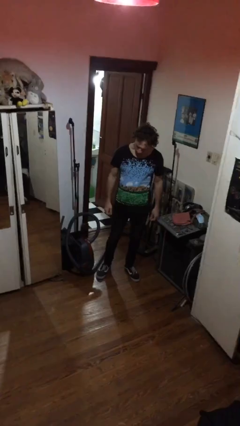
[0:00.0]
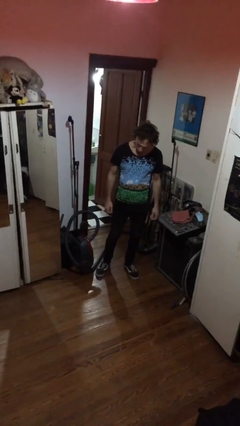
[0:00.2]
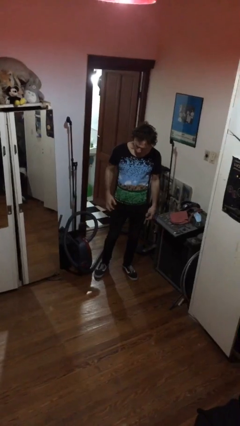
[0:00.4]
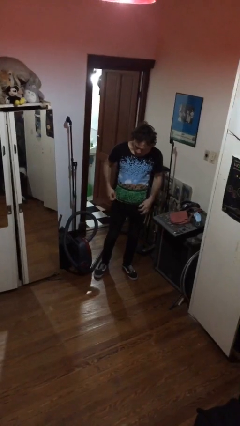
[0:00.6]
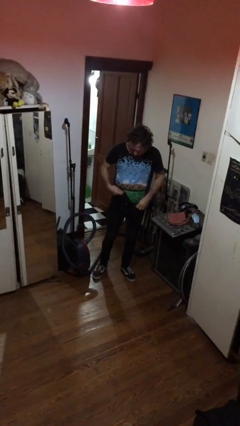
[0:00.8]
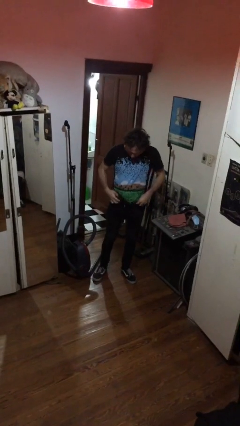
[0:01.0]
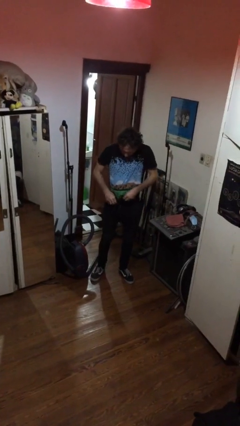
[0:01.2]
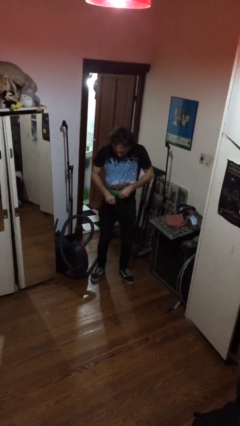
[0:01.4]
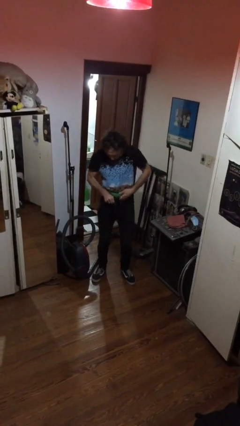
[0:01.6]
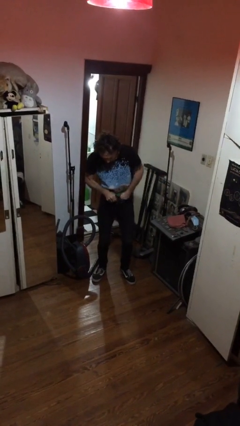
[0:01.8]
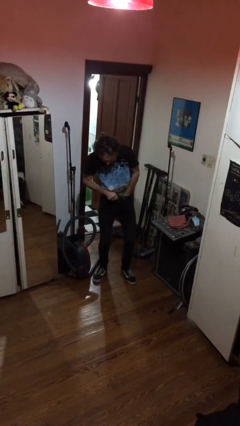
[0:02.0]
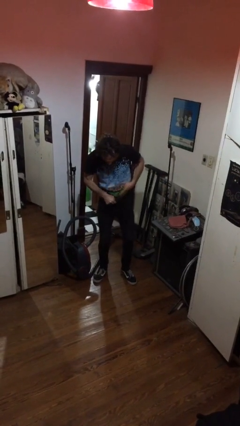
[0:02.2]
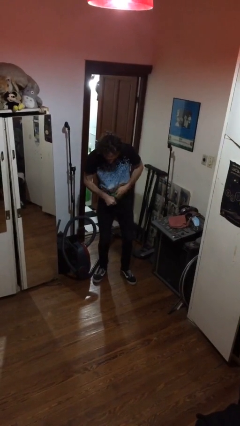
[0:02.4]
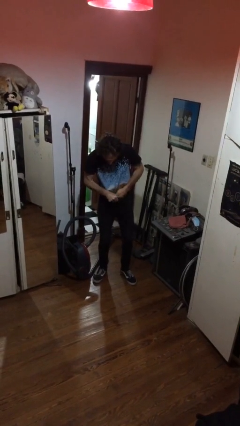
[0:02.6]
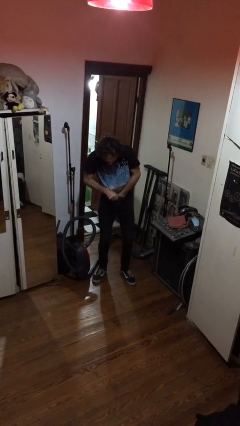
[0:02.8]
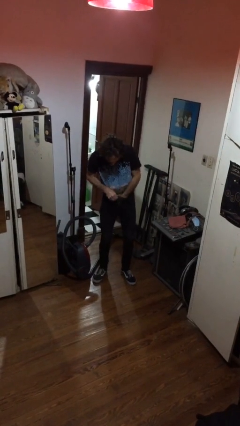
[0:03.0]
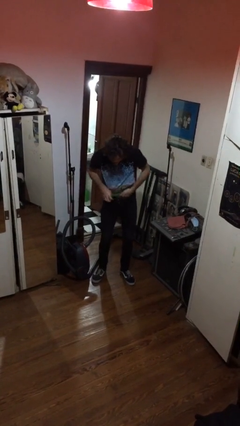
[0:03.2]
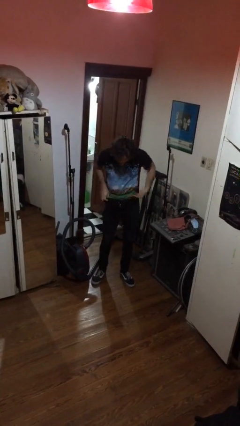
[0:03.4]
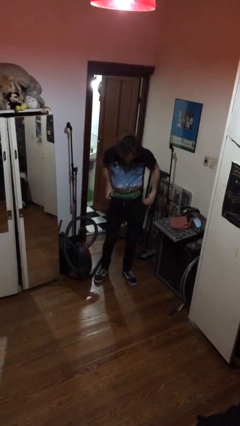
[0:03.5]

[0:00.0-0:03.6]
person tucks in shirt

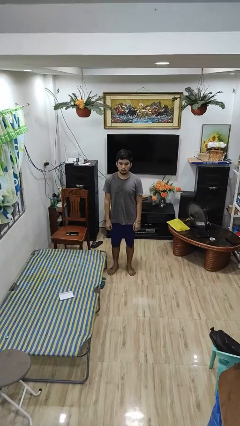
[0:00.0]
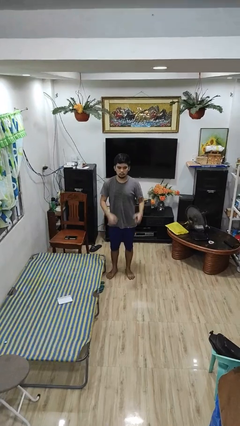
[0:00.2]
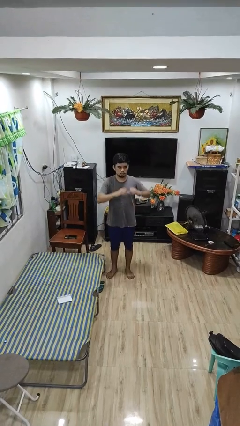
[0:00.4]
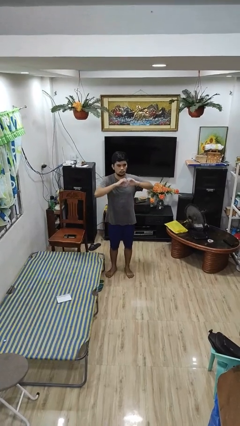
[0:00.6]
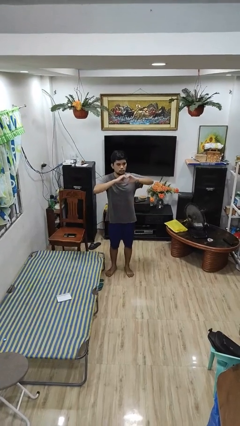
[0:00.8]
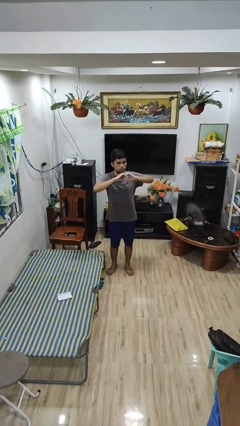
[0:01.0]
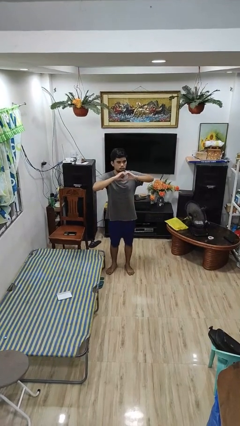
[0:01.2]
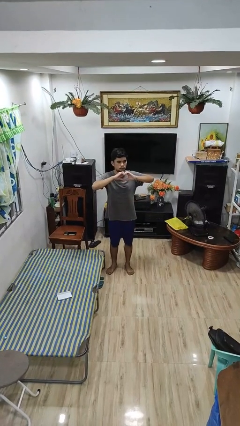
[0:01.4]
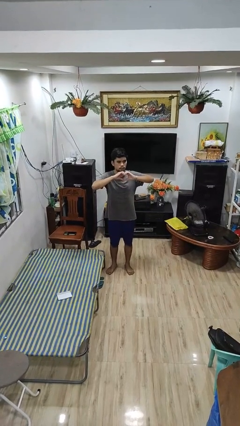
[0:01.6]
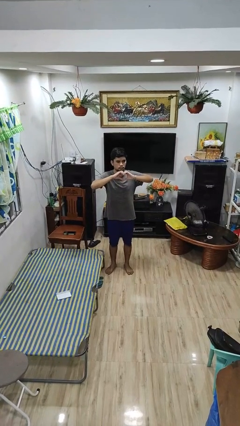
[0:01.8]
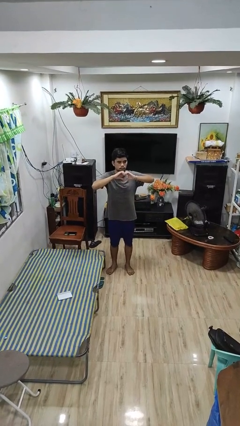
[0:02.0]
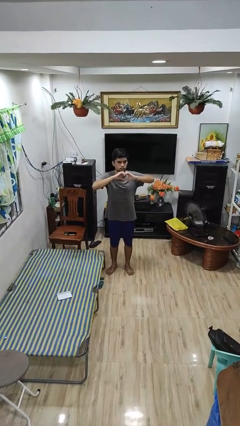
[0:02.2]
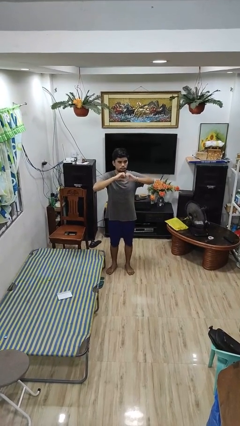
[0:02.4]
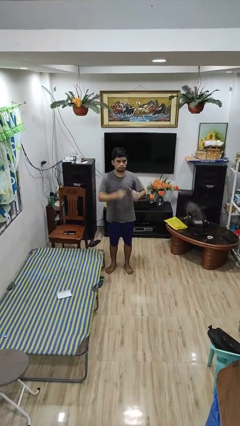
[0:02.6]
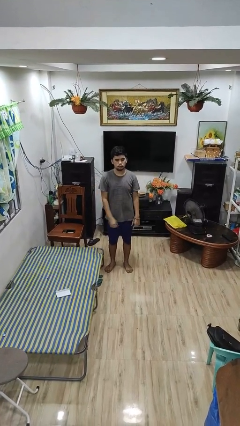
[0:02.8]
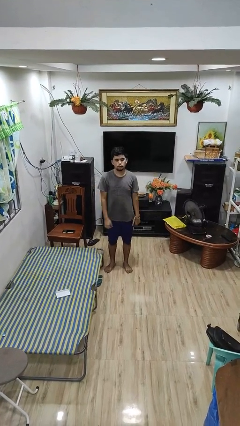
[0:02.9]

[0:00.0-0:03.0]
person gestures heart

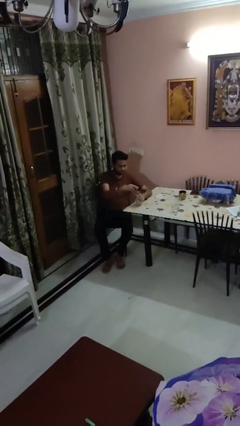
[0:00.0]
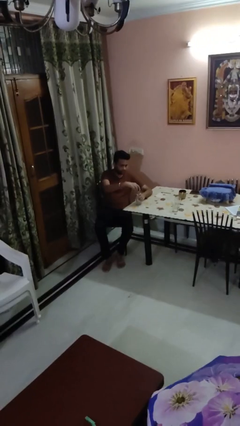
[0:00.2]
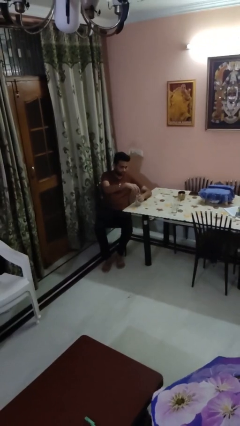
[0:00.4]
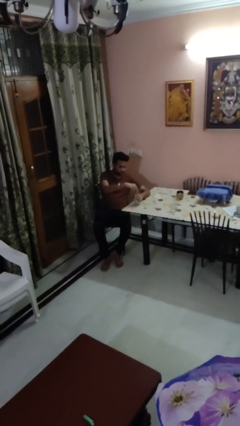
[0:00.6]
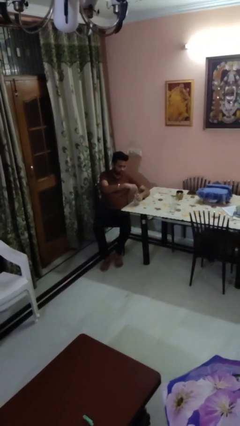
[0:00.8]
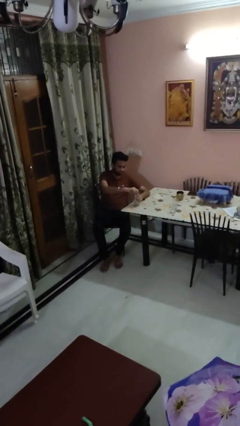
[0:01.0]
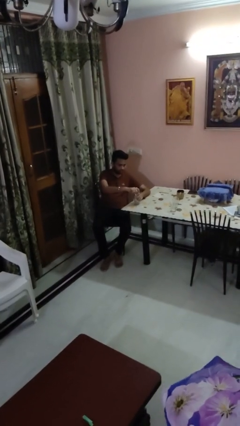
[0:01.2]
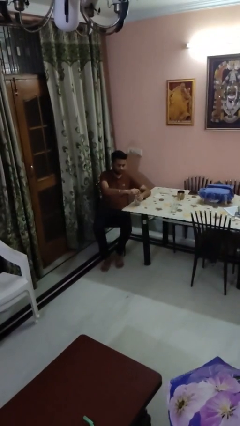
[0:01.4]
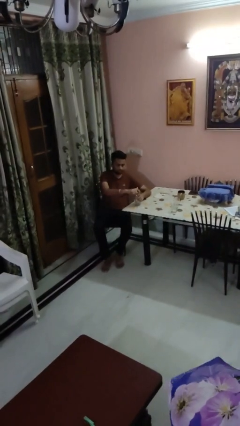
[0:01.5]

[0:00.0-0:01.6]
person screws lid to bottle

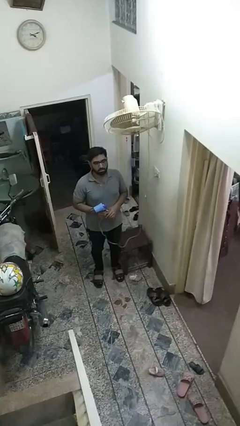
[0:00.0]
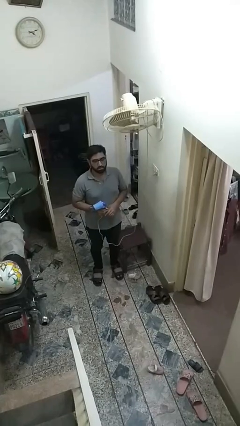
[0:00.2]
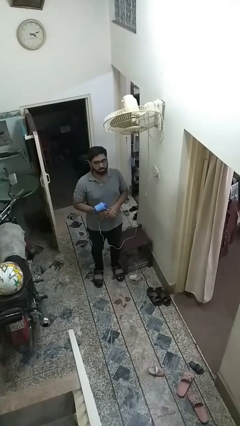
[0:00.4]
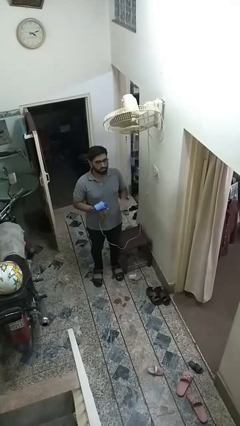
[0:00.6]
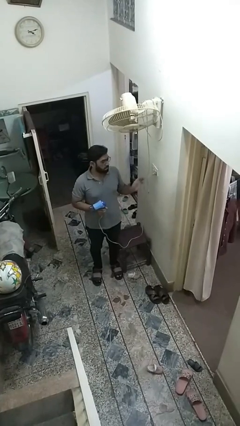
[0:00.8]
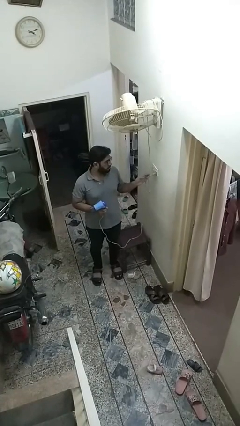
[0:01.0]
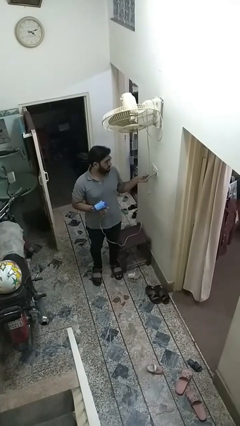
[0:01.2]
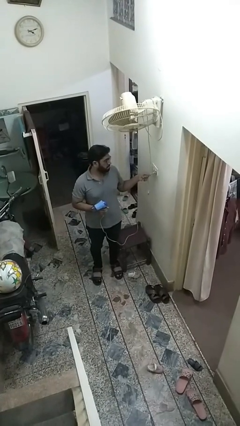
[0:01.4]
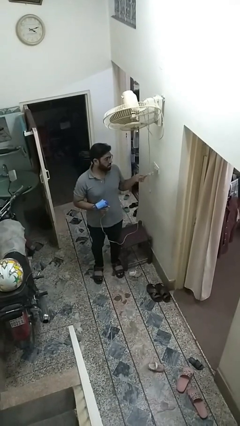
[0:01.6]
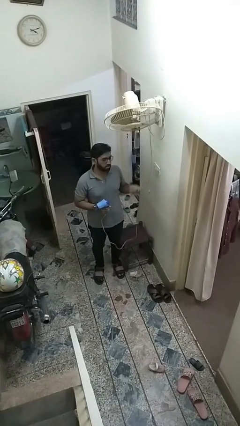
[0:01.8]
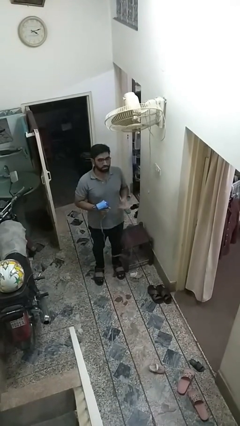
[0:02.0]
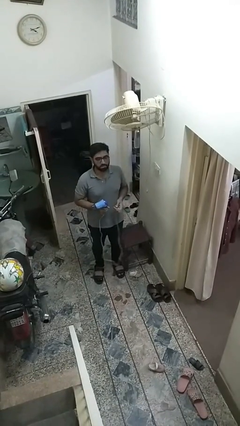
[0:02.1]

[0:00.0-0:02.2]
person unplugs from electrical socket

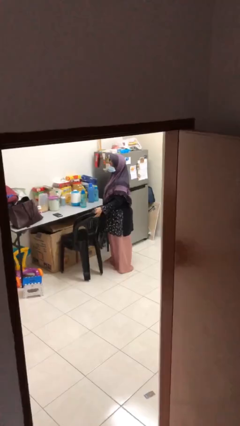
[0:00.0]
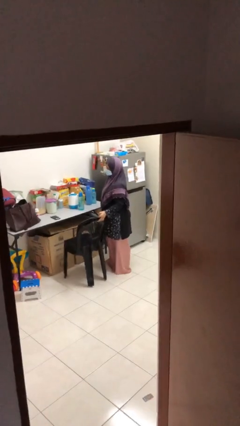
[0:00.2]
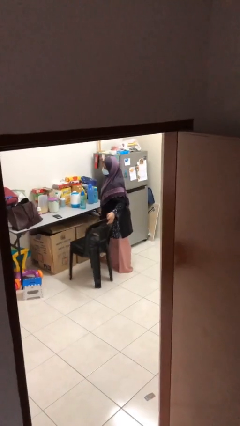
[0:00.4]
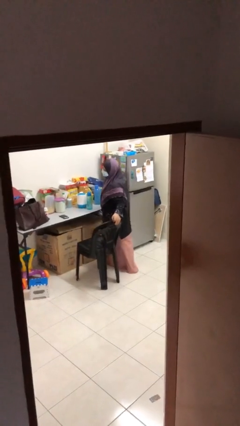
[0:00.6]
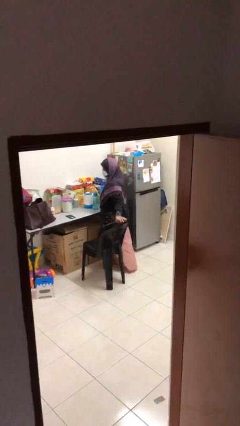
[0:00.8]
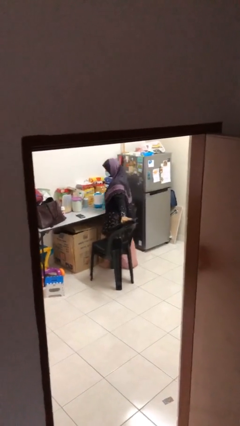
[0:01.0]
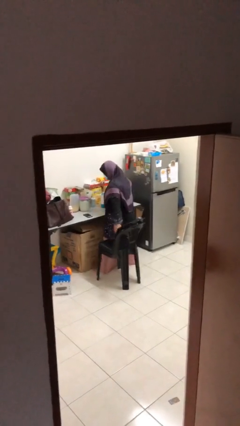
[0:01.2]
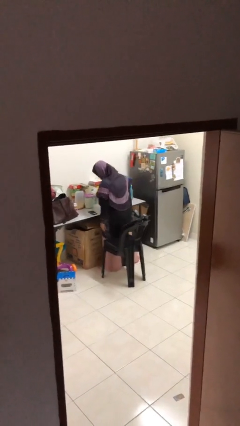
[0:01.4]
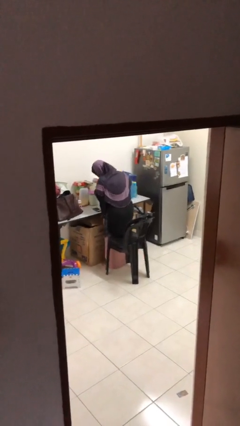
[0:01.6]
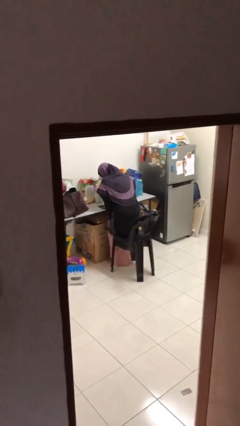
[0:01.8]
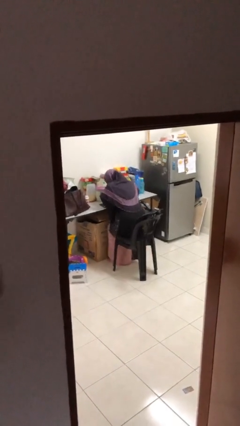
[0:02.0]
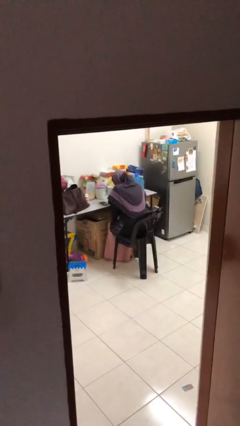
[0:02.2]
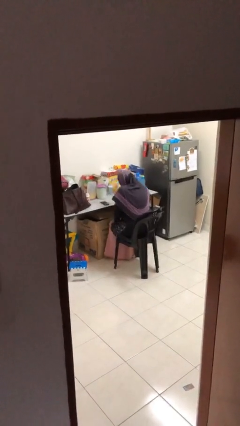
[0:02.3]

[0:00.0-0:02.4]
person sits down

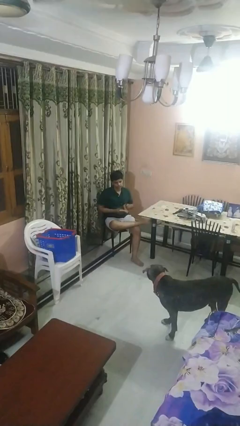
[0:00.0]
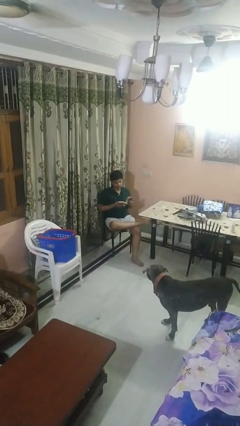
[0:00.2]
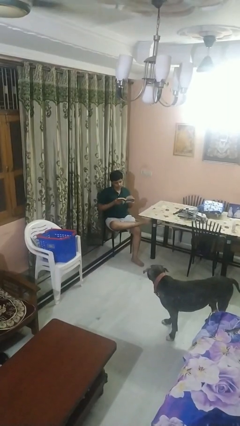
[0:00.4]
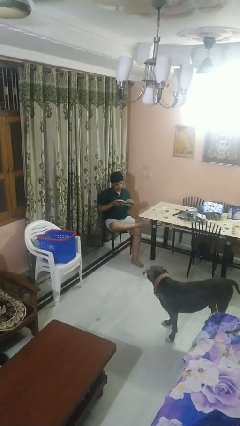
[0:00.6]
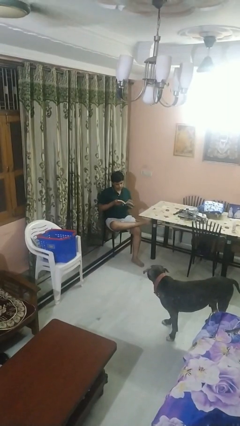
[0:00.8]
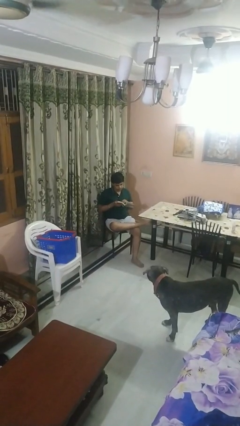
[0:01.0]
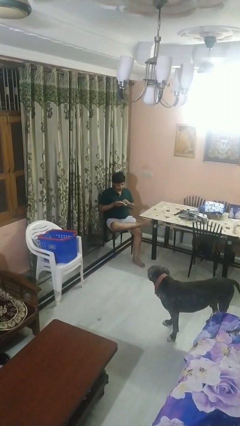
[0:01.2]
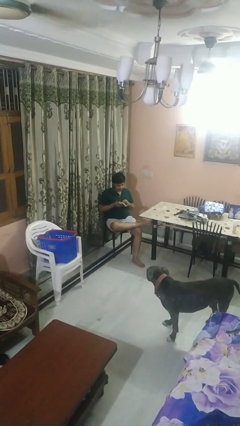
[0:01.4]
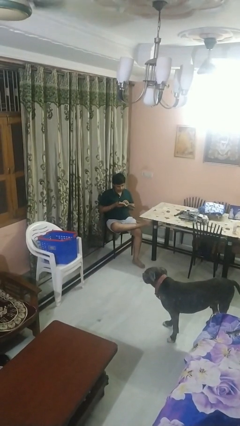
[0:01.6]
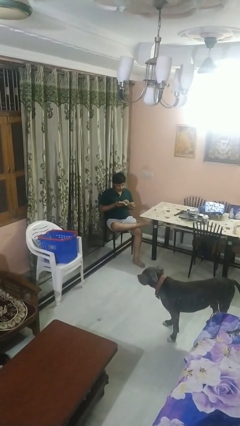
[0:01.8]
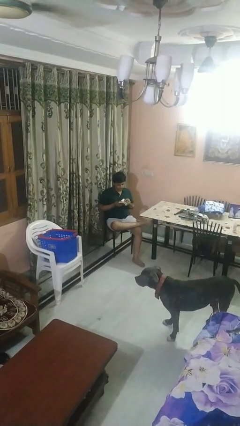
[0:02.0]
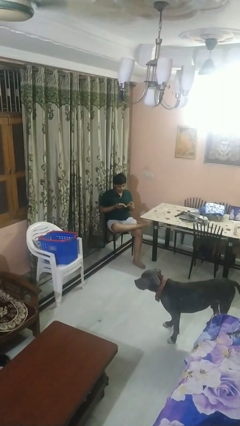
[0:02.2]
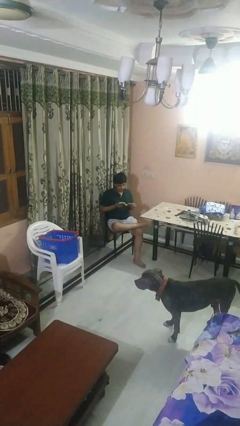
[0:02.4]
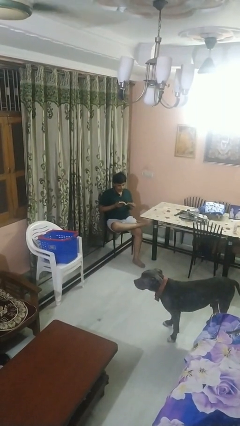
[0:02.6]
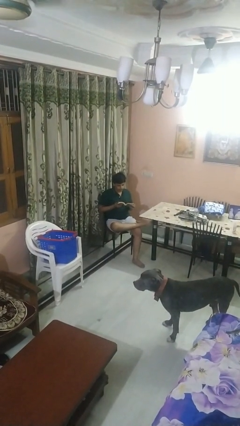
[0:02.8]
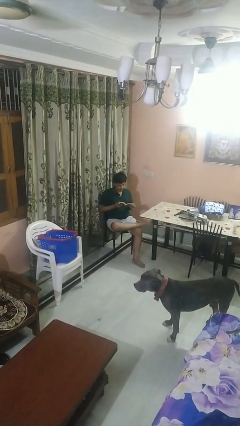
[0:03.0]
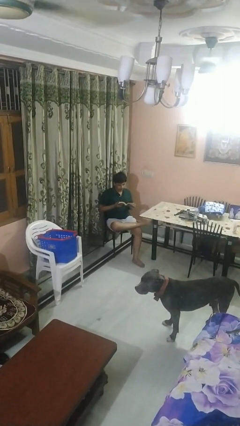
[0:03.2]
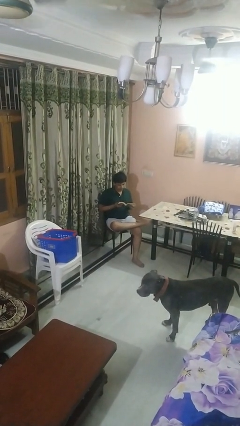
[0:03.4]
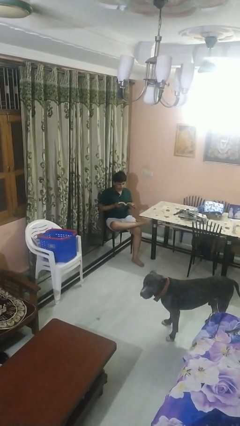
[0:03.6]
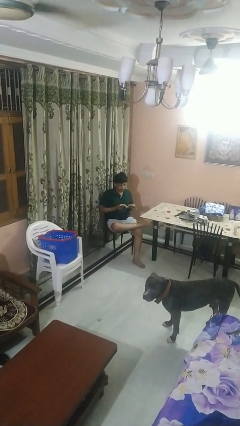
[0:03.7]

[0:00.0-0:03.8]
person reads book

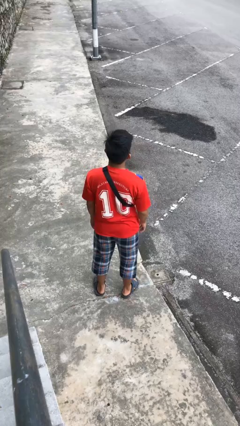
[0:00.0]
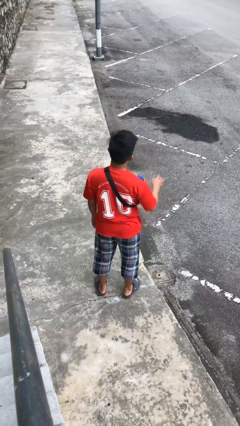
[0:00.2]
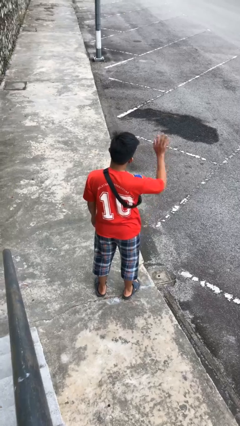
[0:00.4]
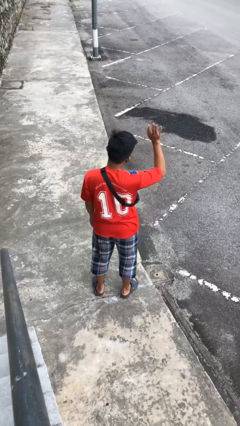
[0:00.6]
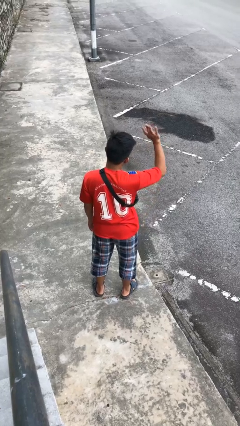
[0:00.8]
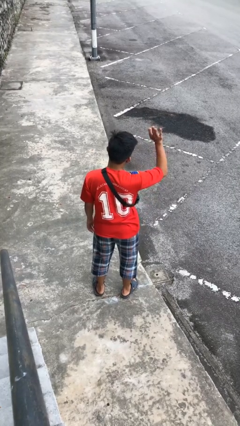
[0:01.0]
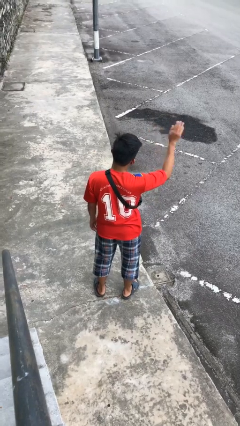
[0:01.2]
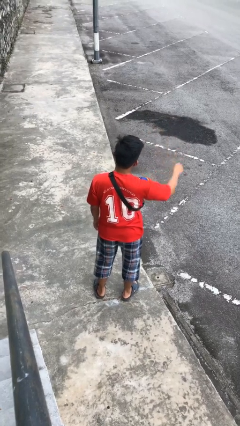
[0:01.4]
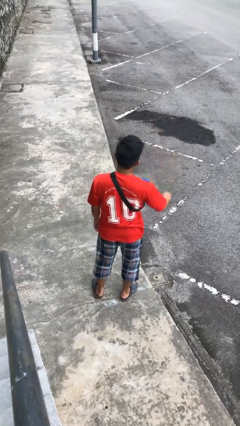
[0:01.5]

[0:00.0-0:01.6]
person waves at person
